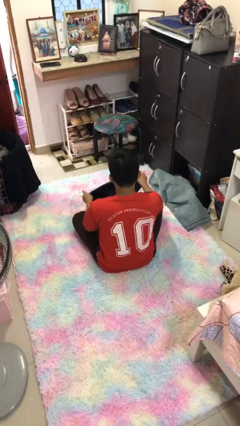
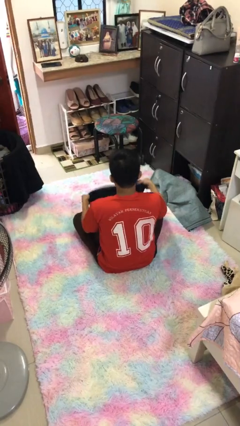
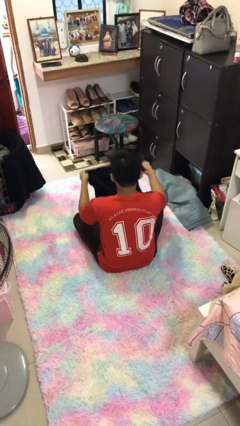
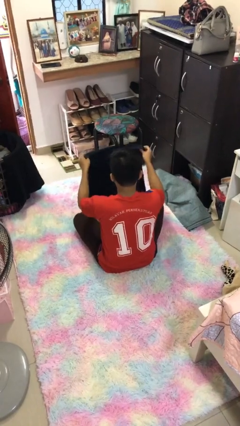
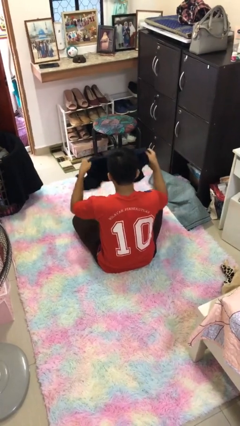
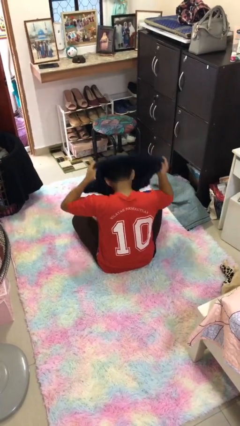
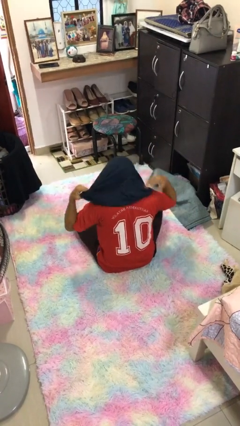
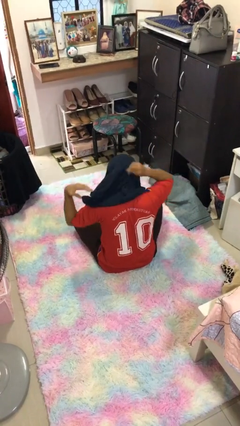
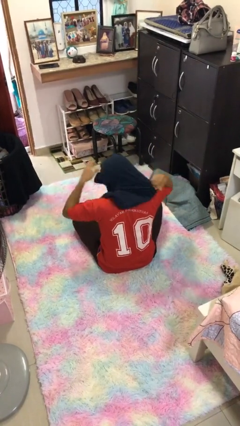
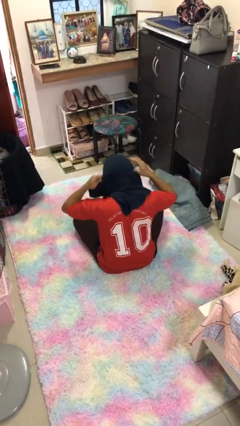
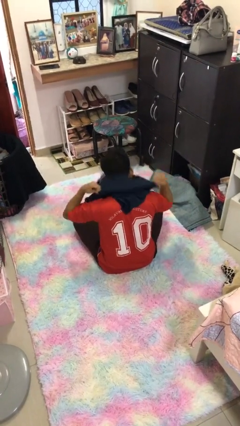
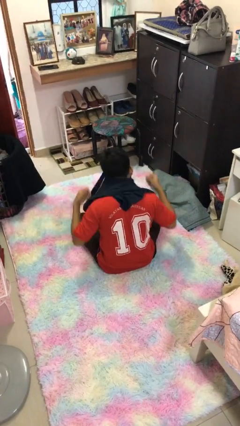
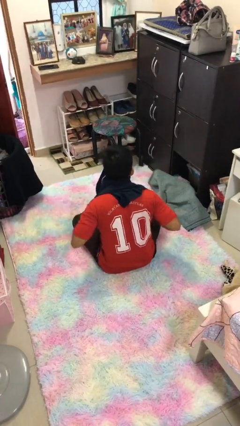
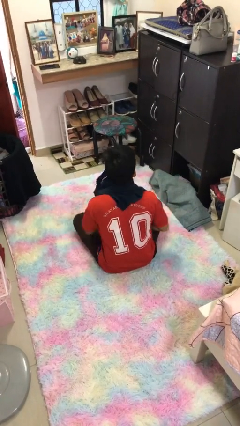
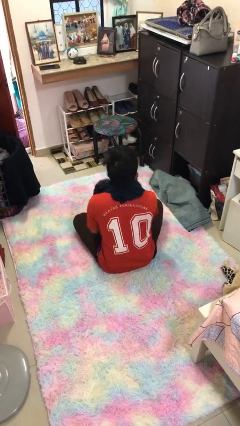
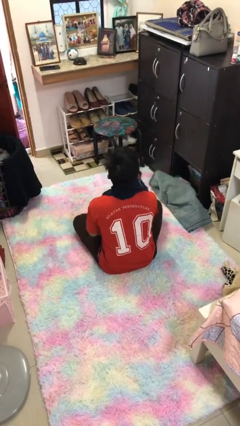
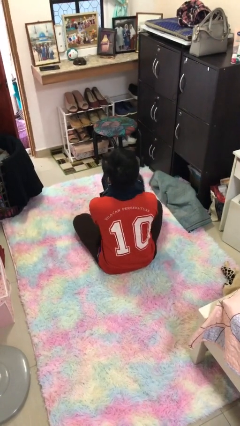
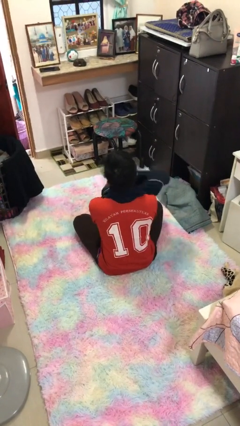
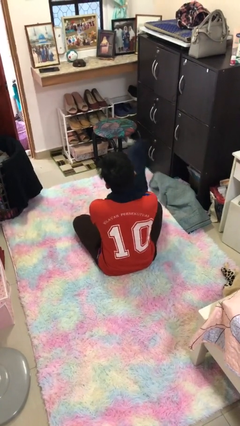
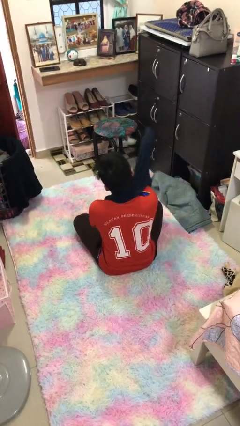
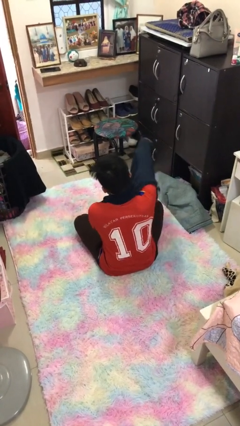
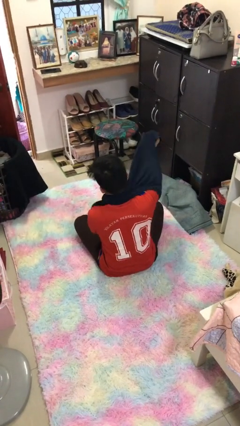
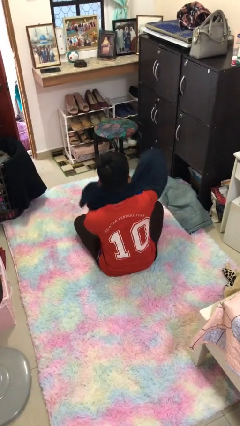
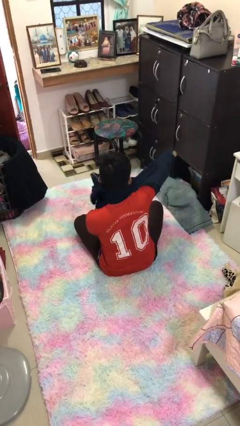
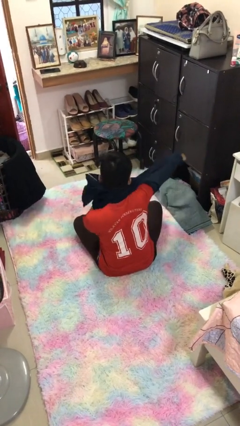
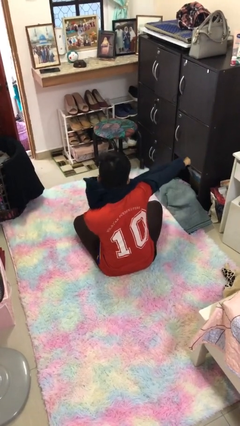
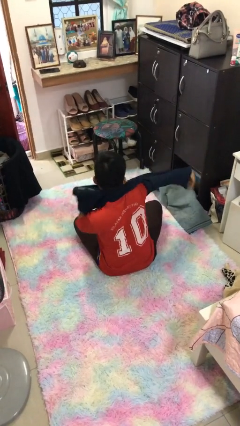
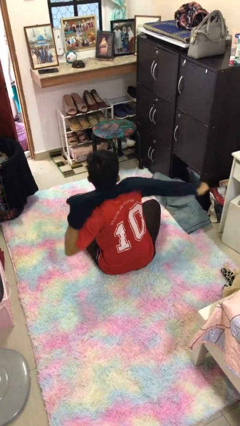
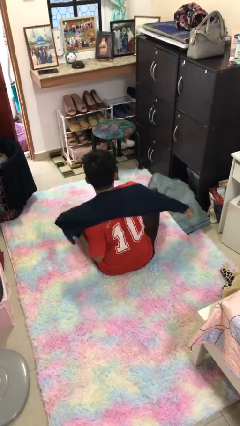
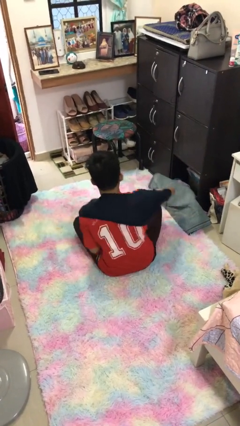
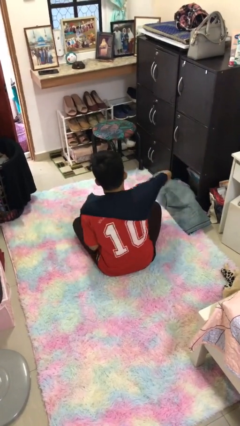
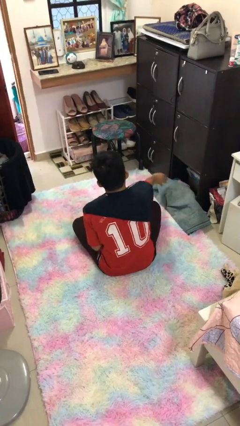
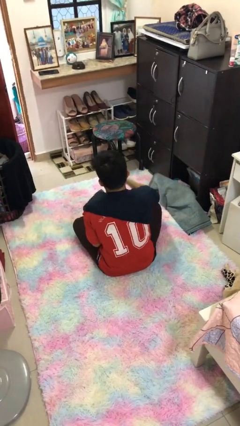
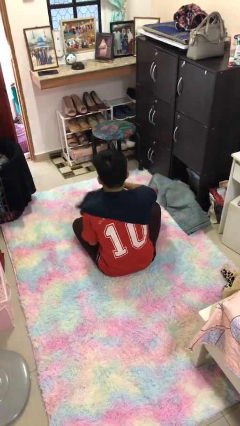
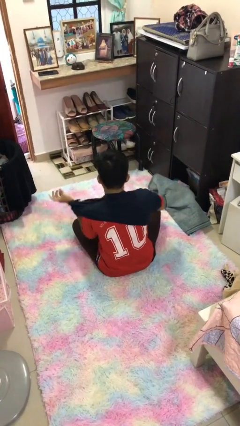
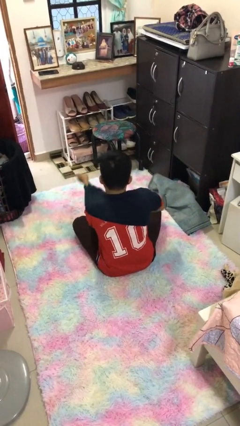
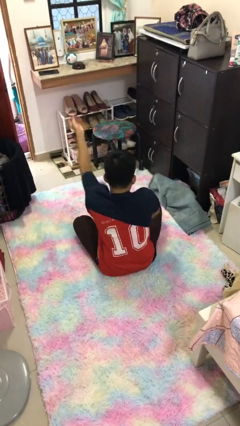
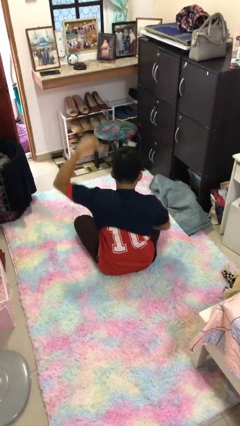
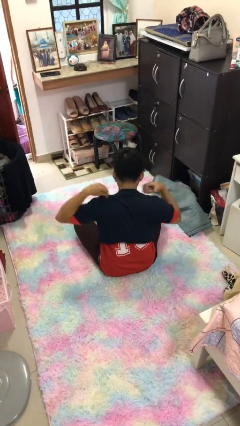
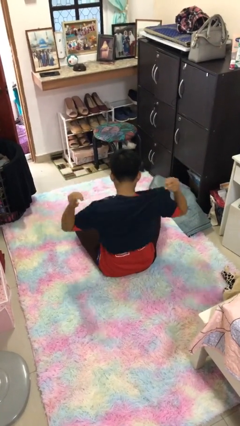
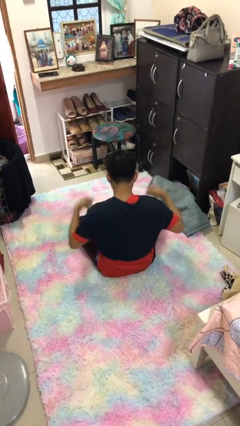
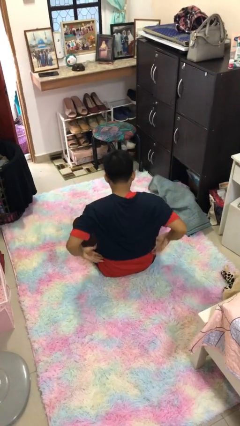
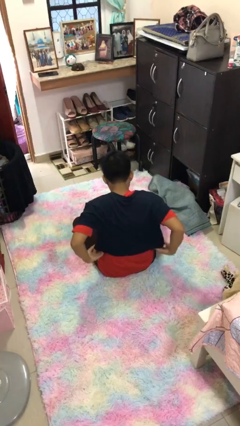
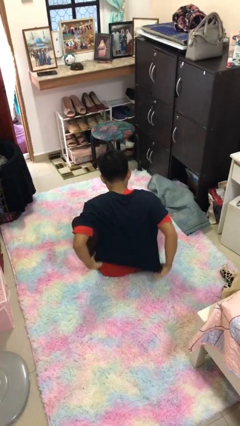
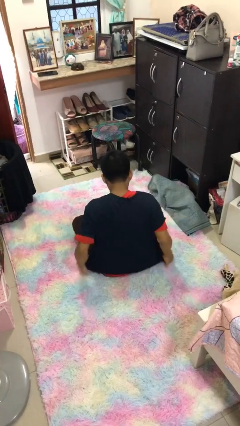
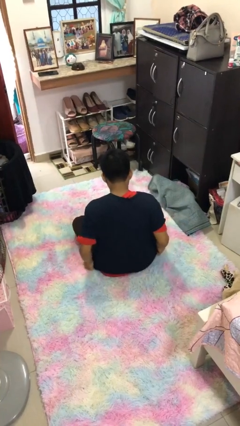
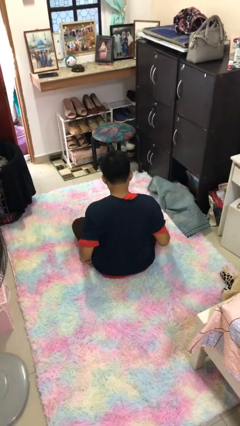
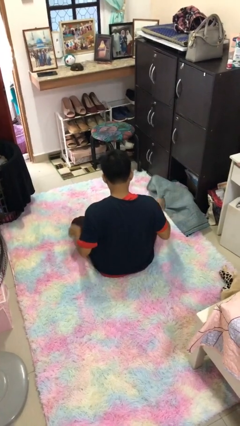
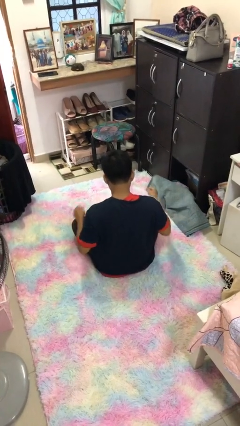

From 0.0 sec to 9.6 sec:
person puts on shirt

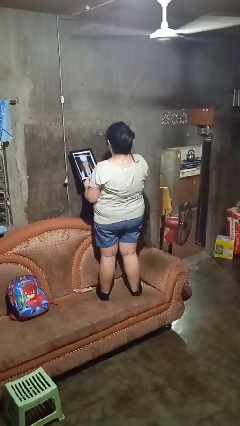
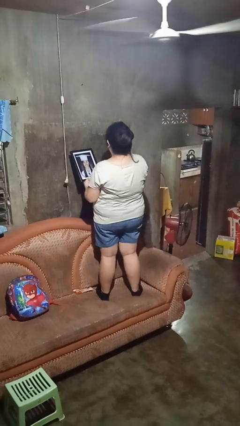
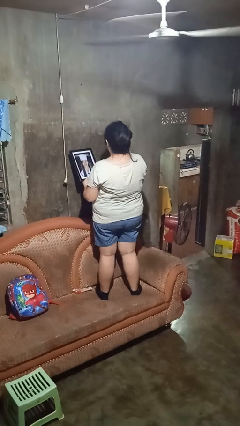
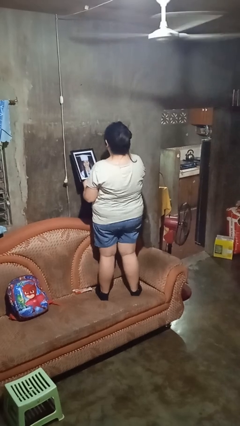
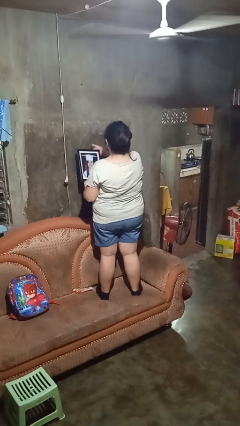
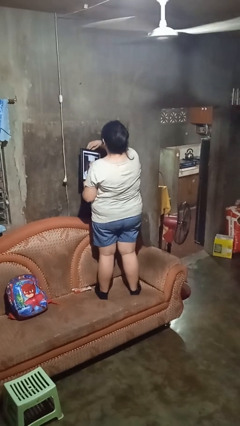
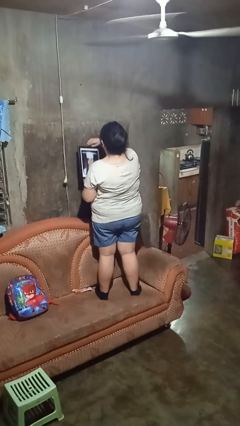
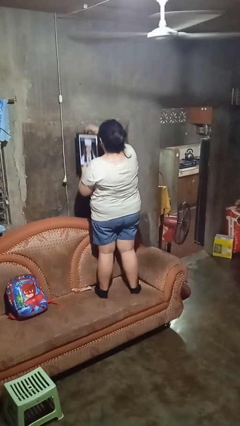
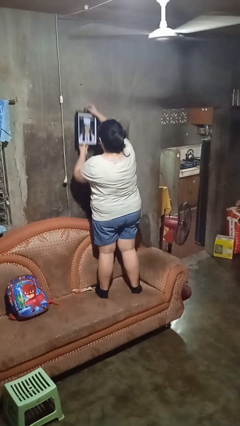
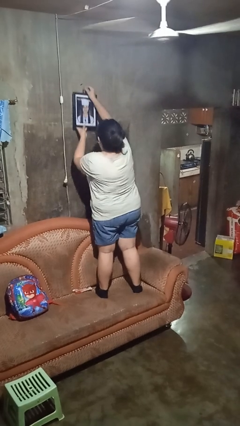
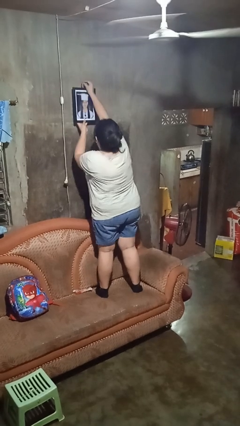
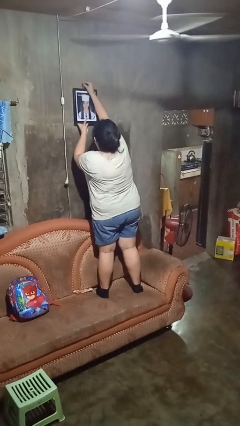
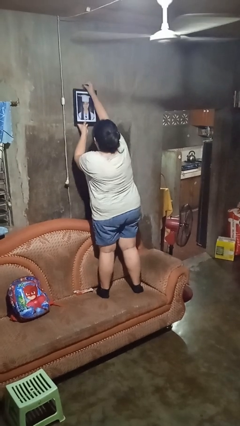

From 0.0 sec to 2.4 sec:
person puts up picture frame

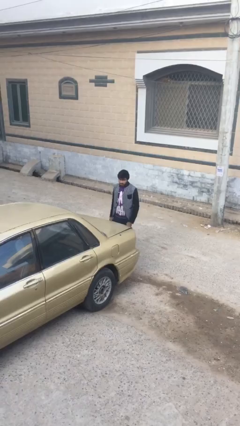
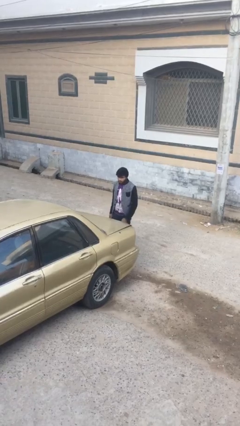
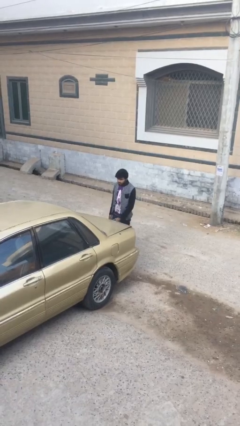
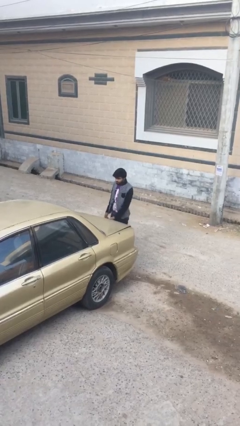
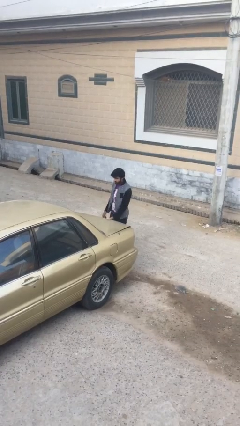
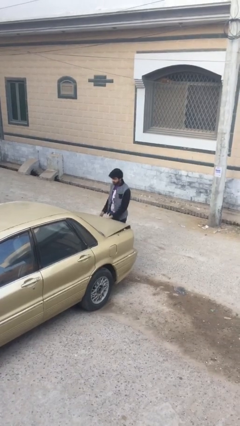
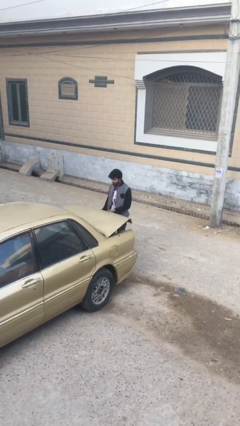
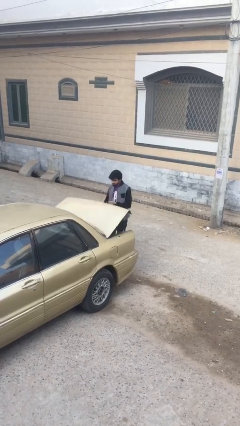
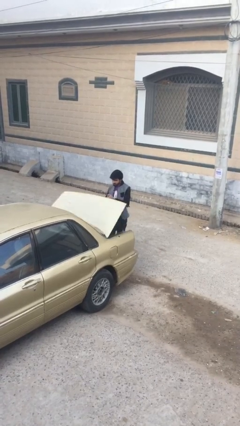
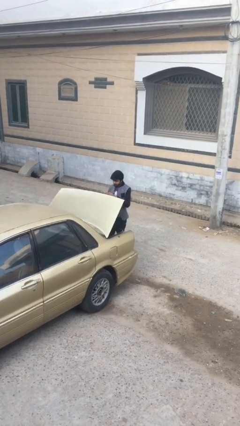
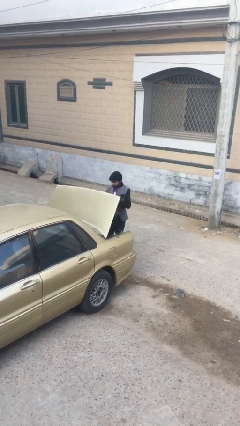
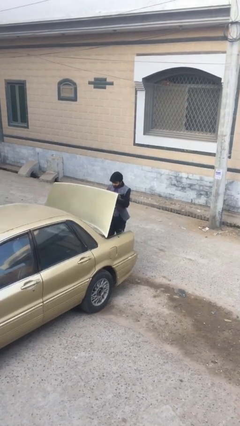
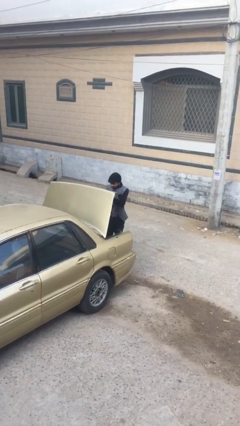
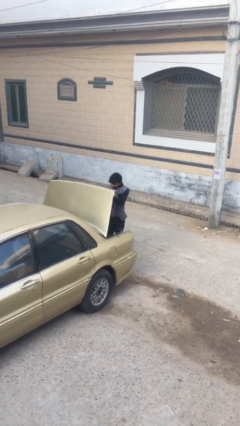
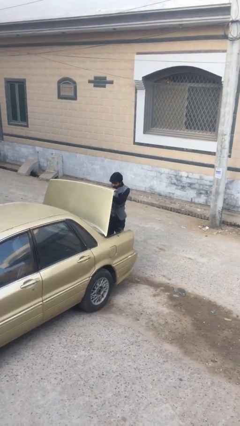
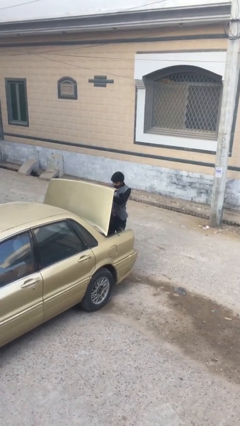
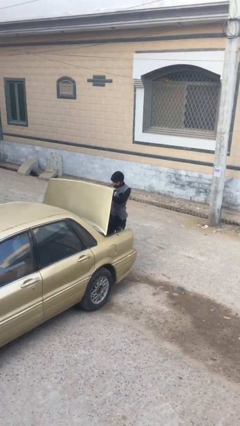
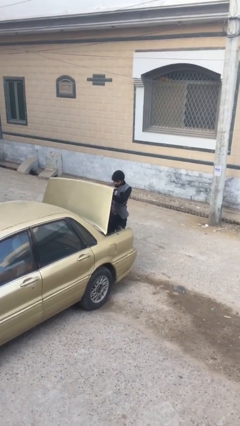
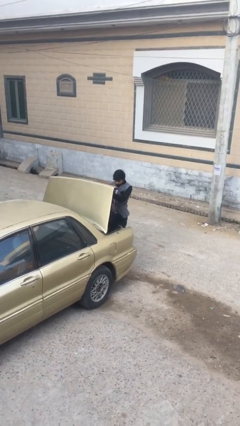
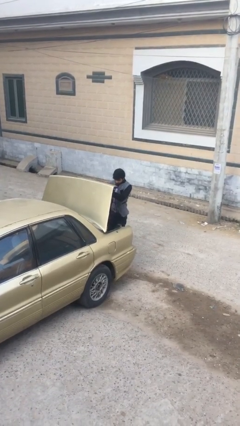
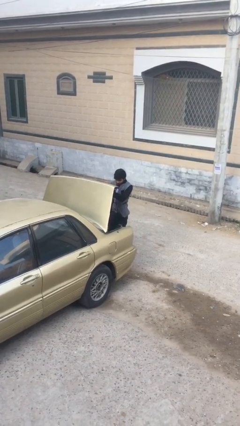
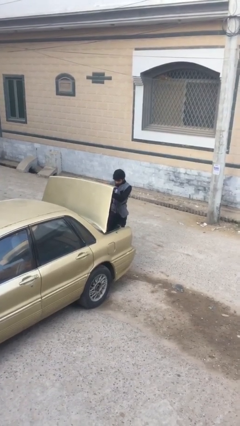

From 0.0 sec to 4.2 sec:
person opens car trunk

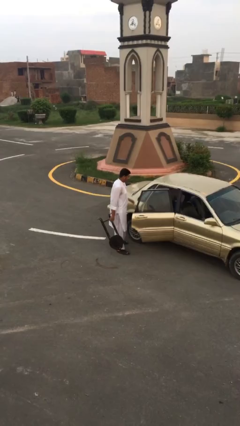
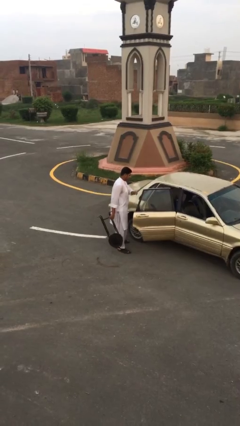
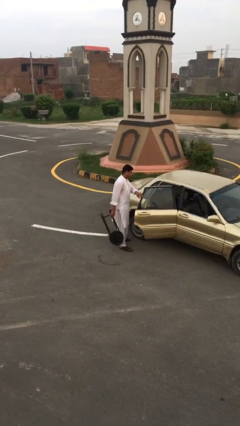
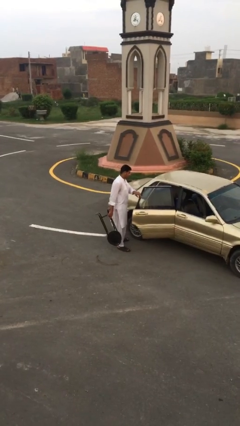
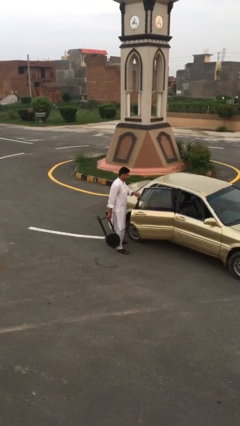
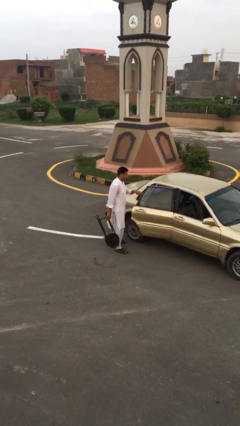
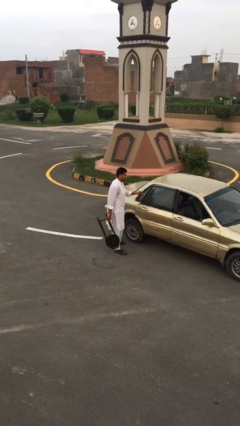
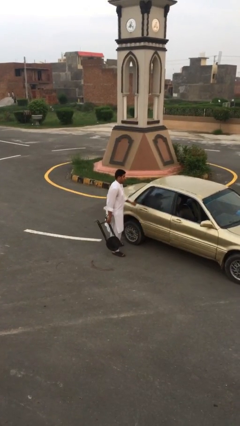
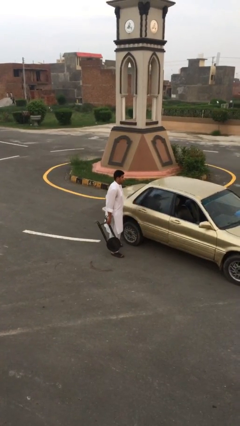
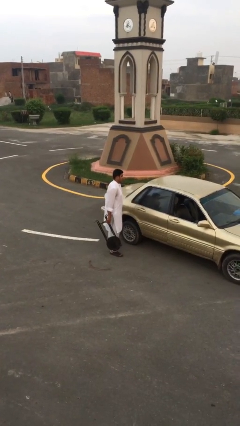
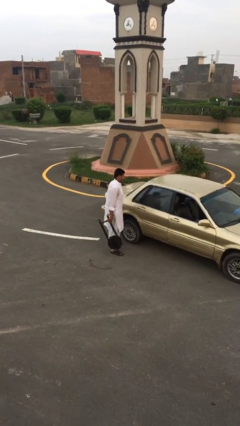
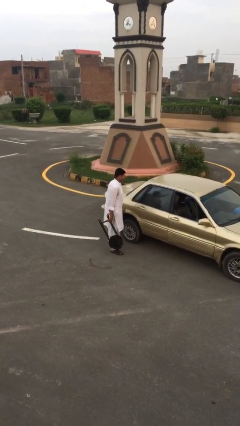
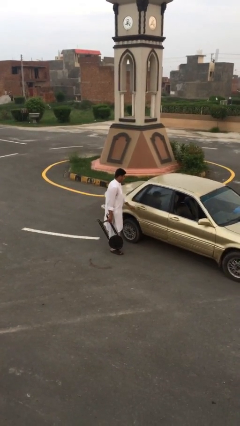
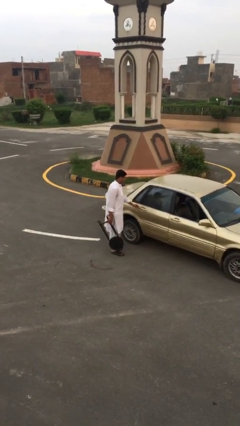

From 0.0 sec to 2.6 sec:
person closes car door
